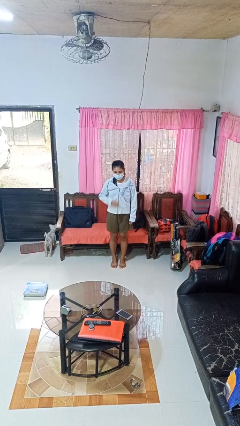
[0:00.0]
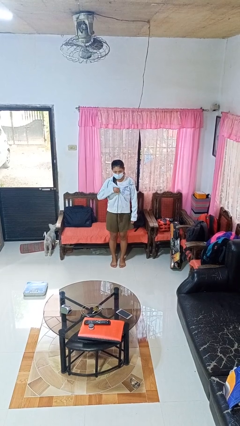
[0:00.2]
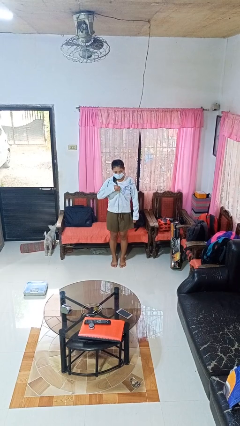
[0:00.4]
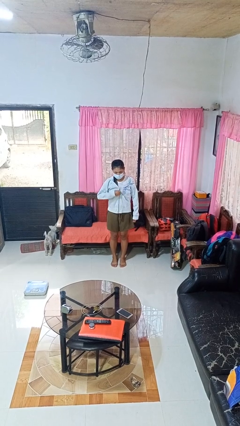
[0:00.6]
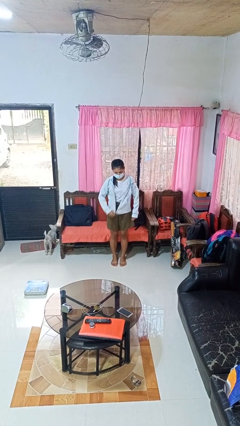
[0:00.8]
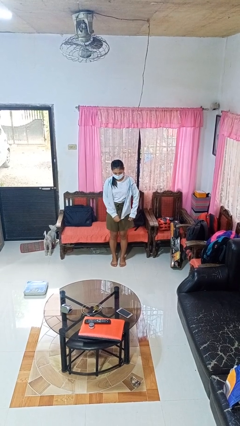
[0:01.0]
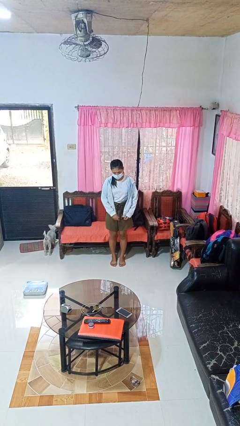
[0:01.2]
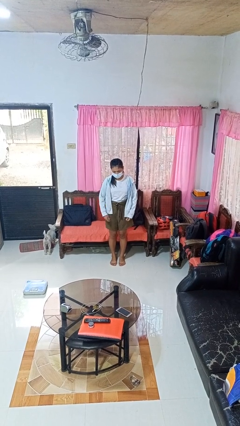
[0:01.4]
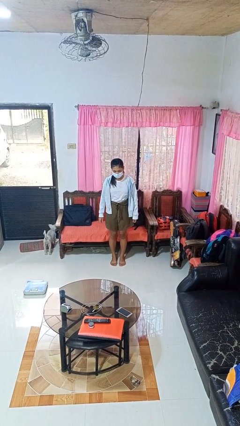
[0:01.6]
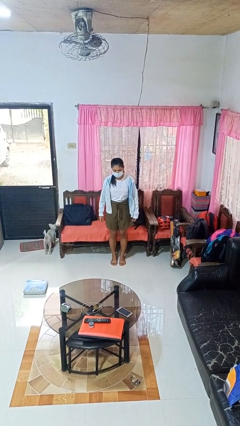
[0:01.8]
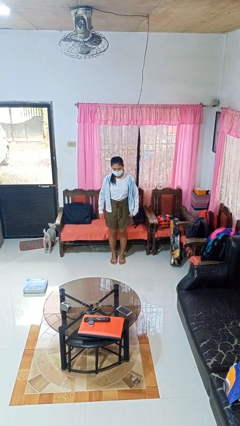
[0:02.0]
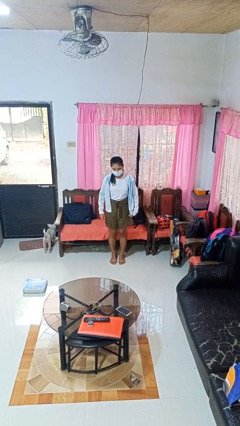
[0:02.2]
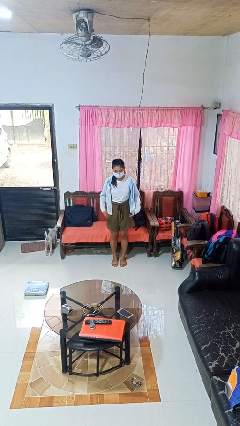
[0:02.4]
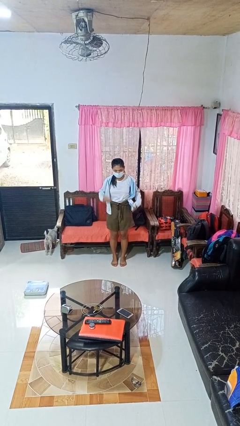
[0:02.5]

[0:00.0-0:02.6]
person unzips jacket

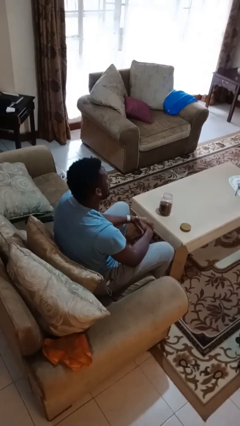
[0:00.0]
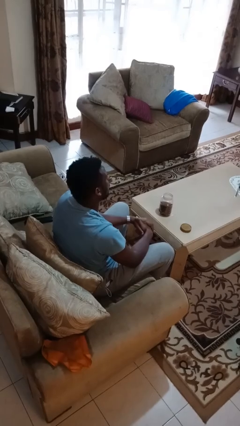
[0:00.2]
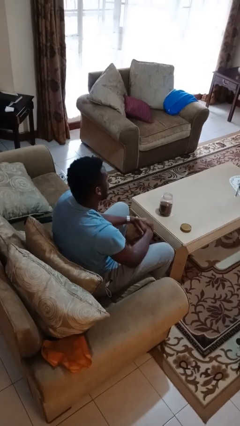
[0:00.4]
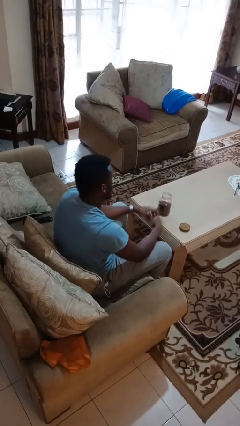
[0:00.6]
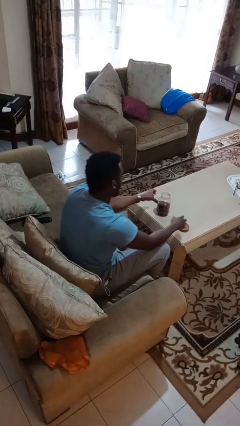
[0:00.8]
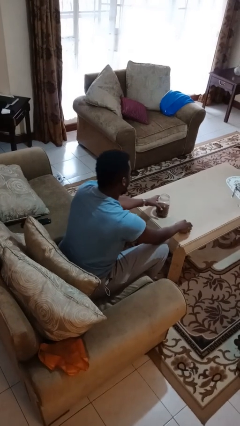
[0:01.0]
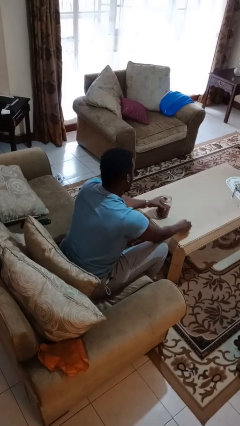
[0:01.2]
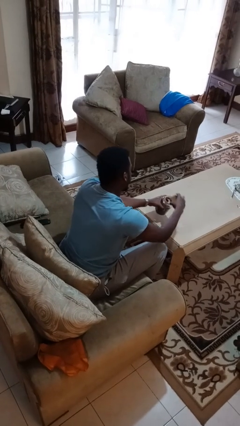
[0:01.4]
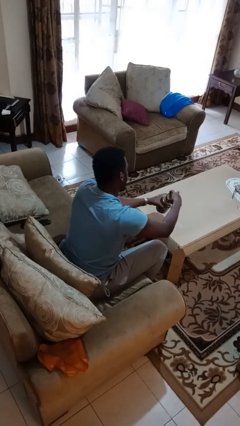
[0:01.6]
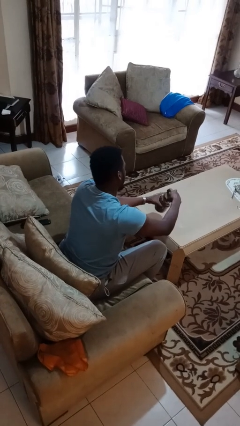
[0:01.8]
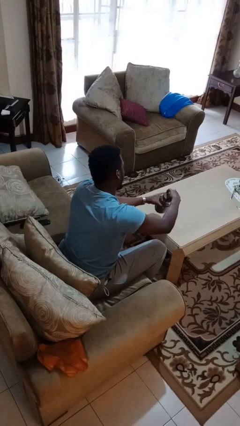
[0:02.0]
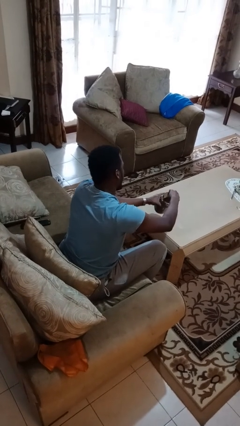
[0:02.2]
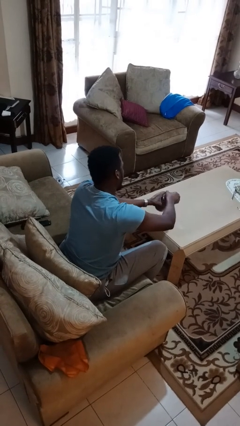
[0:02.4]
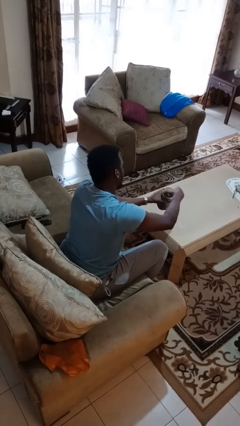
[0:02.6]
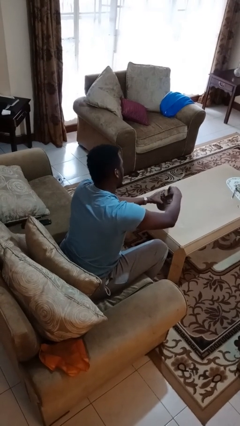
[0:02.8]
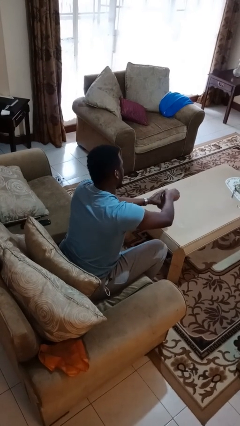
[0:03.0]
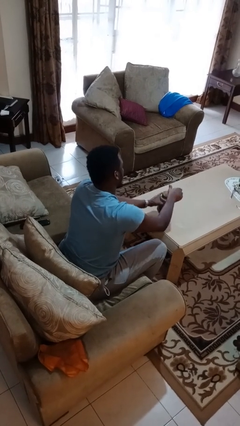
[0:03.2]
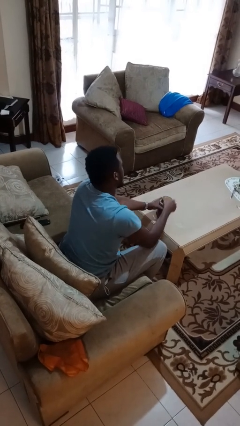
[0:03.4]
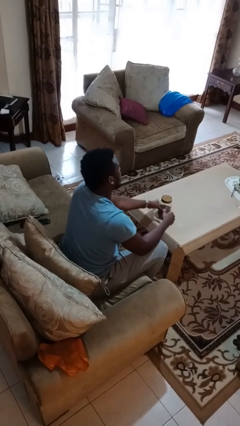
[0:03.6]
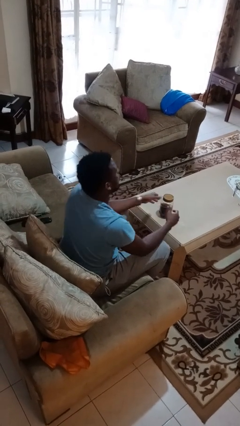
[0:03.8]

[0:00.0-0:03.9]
person closes jar

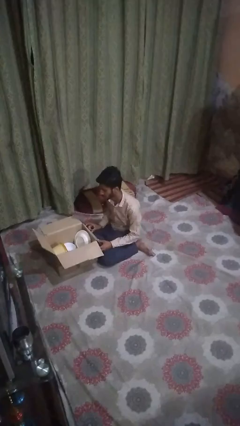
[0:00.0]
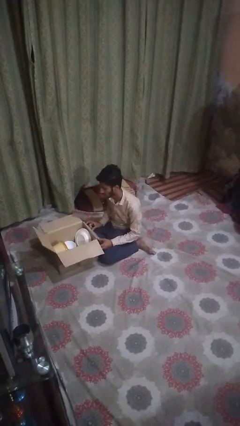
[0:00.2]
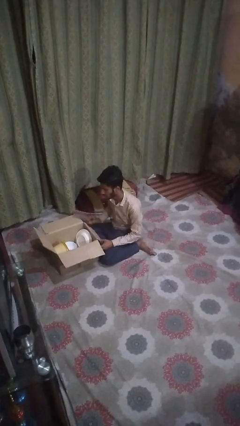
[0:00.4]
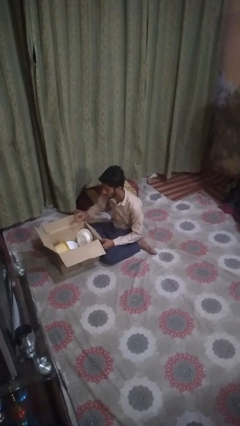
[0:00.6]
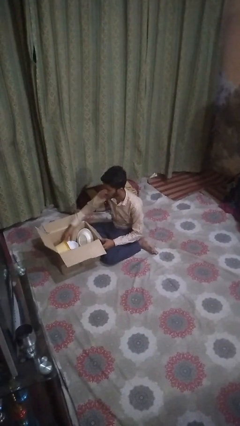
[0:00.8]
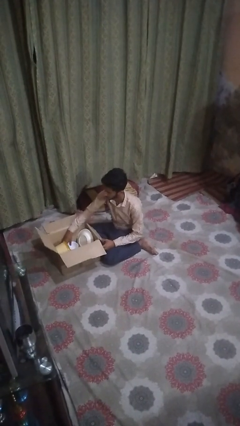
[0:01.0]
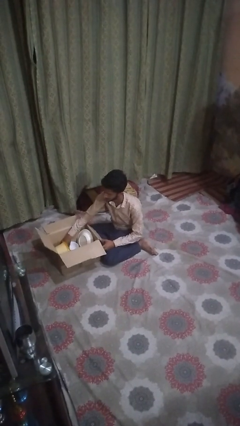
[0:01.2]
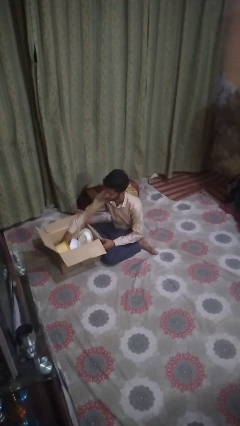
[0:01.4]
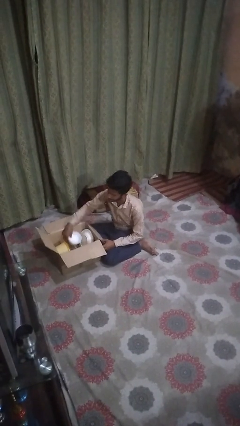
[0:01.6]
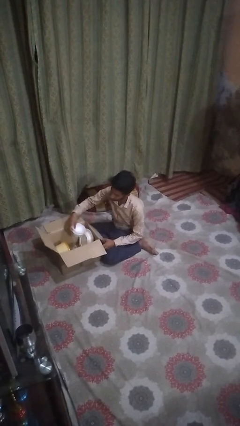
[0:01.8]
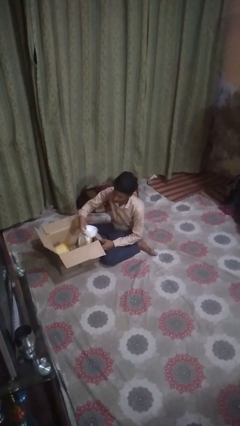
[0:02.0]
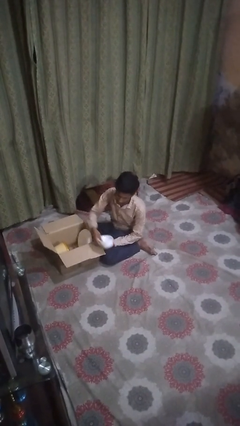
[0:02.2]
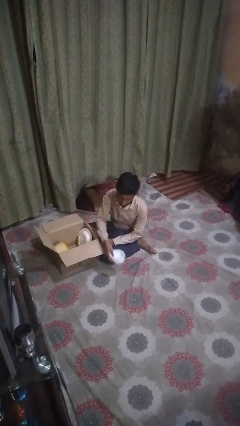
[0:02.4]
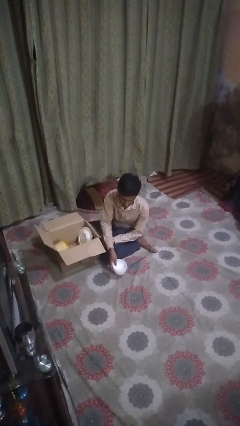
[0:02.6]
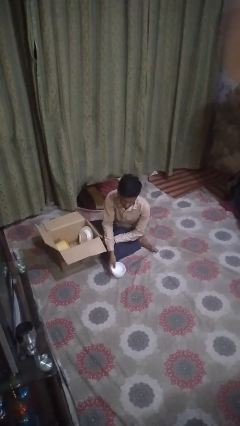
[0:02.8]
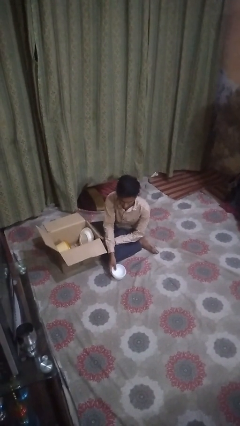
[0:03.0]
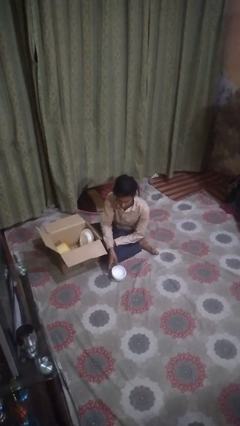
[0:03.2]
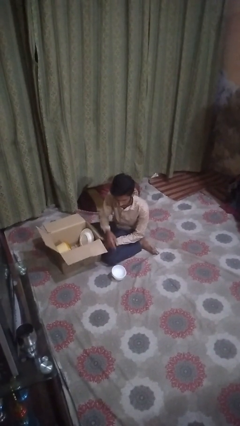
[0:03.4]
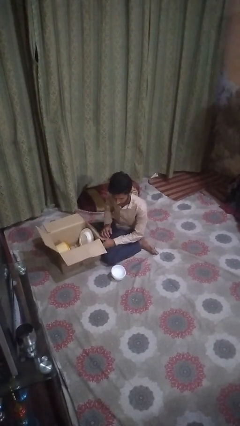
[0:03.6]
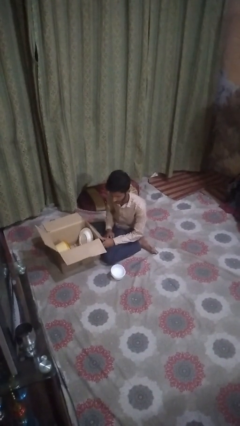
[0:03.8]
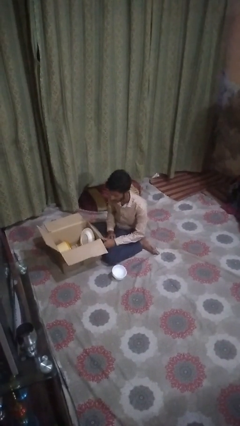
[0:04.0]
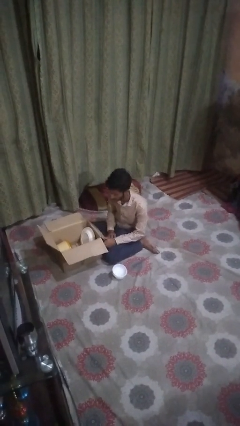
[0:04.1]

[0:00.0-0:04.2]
person takes object from box

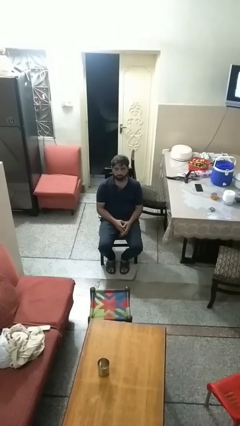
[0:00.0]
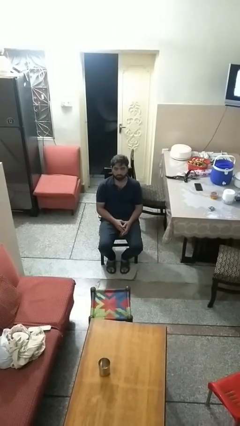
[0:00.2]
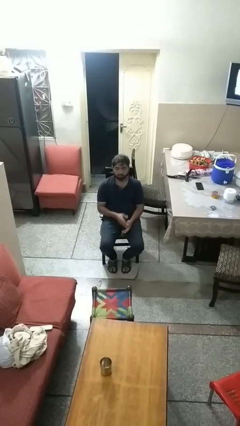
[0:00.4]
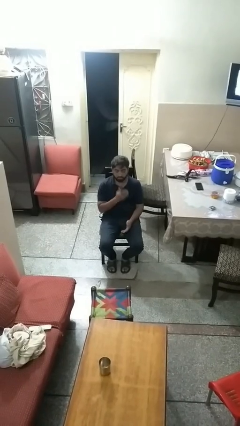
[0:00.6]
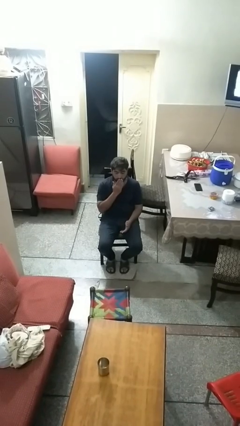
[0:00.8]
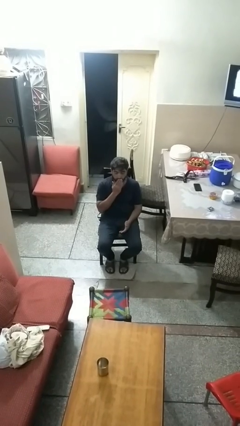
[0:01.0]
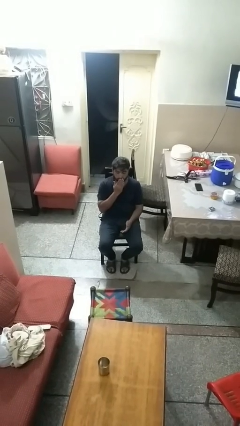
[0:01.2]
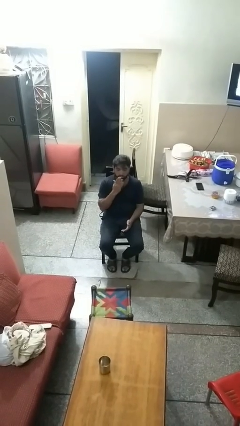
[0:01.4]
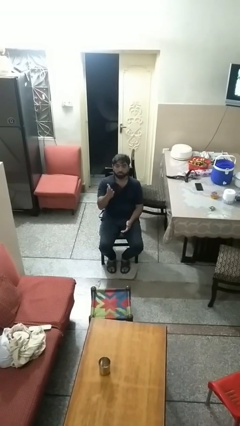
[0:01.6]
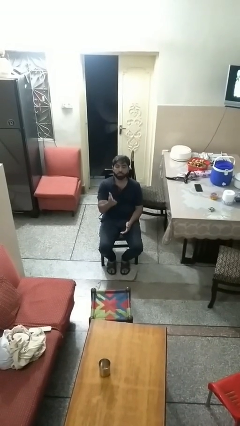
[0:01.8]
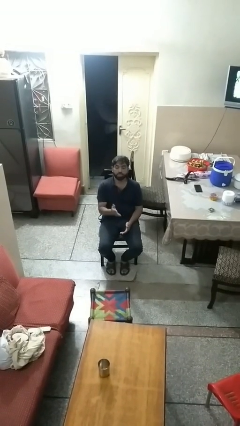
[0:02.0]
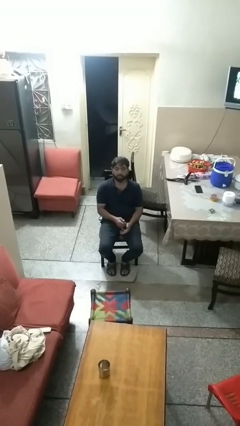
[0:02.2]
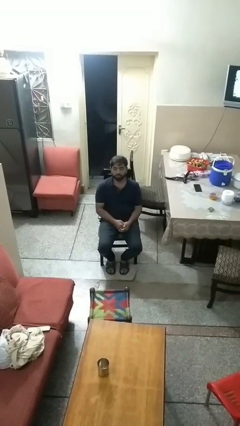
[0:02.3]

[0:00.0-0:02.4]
person gestures blow kiss

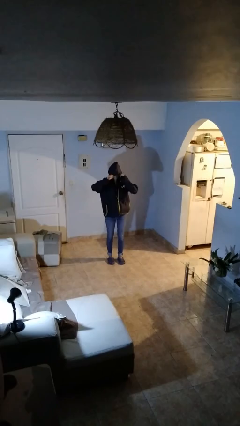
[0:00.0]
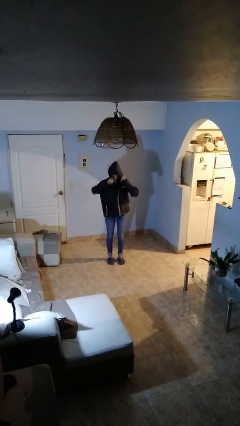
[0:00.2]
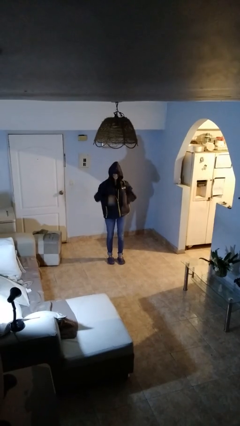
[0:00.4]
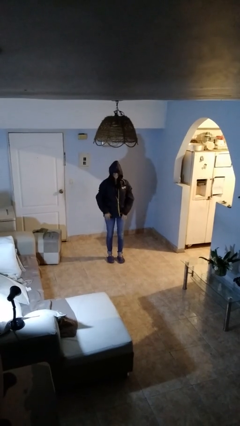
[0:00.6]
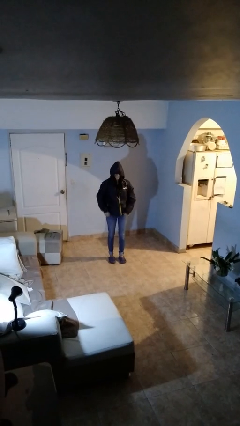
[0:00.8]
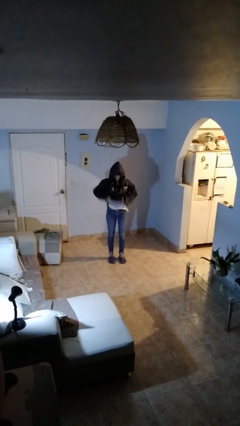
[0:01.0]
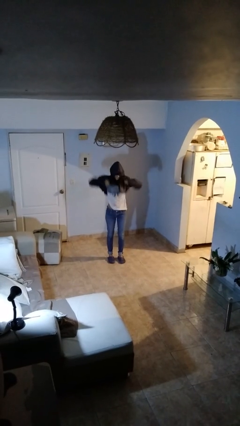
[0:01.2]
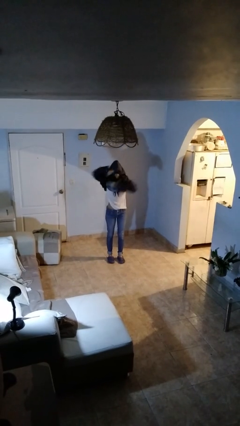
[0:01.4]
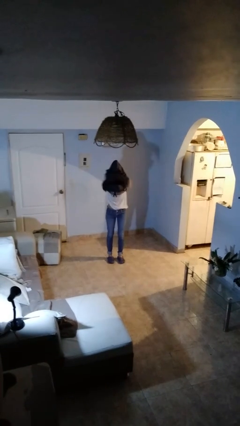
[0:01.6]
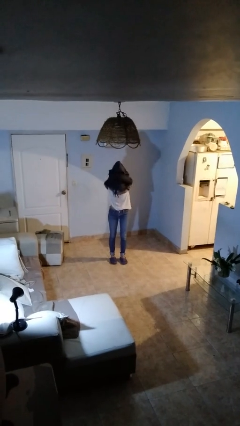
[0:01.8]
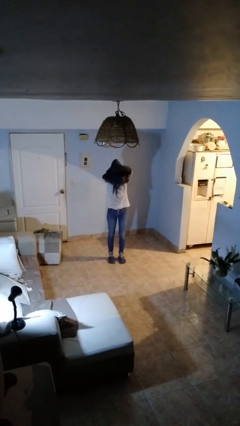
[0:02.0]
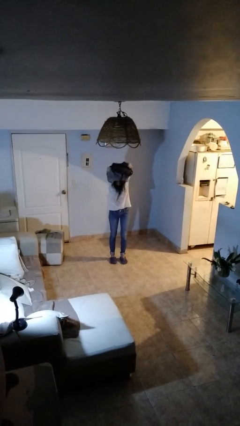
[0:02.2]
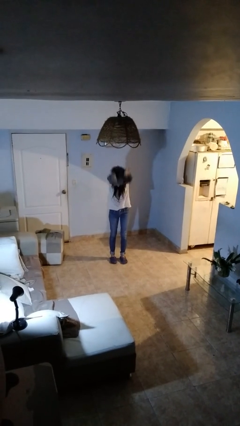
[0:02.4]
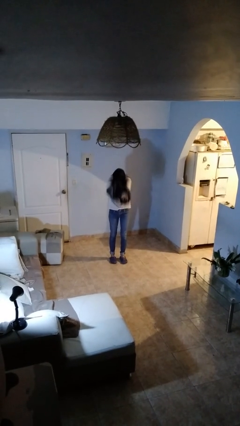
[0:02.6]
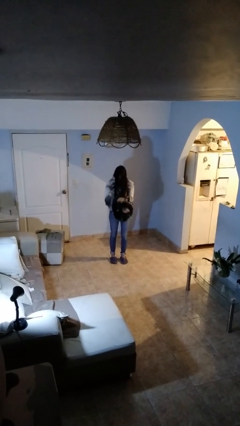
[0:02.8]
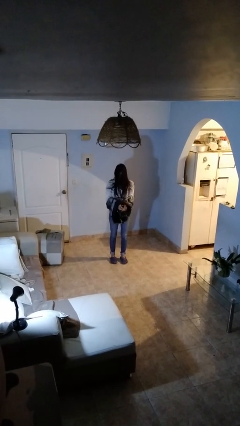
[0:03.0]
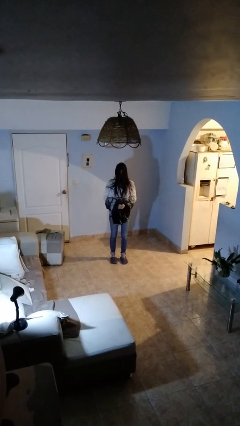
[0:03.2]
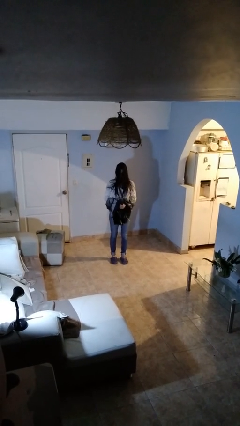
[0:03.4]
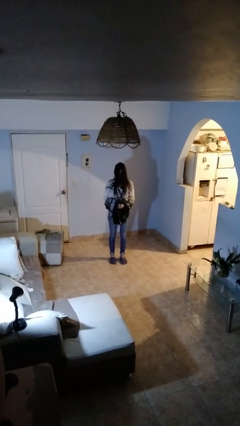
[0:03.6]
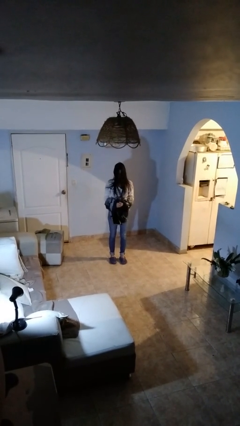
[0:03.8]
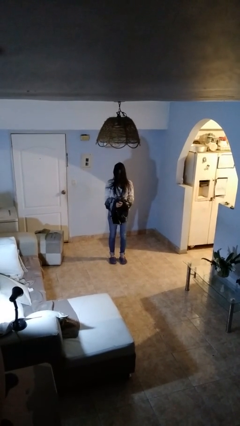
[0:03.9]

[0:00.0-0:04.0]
person takes off hoodie
